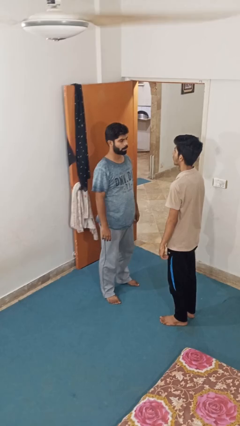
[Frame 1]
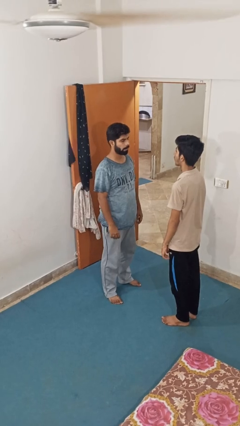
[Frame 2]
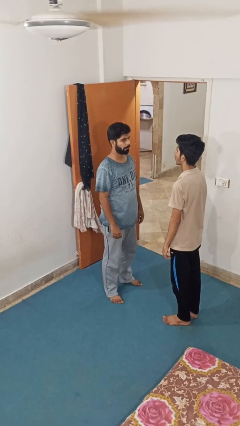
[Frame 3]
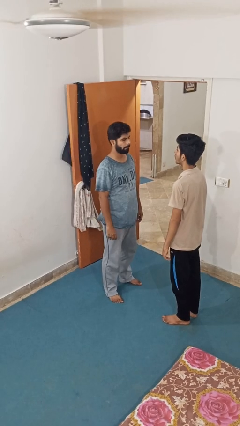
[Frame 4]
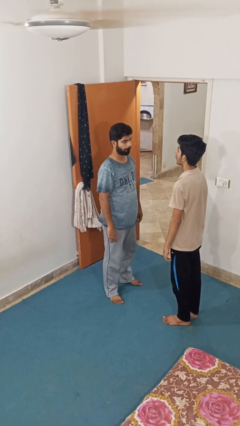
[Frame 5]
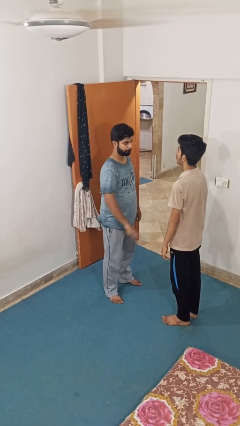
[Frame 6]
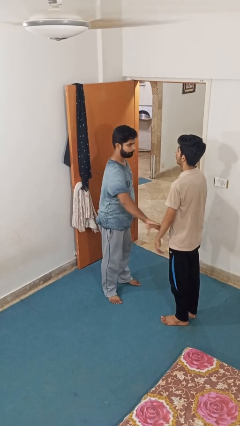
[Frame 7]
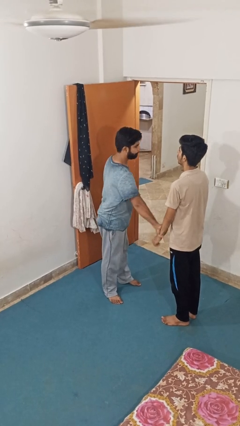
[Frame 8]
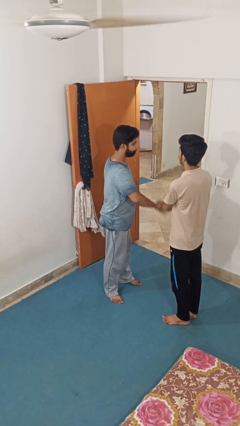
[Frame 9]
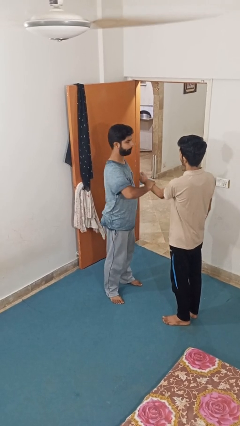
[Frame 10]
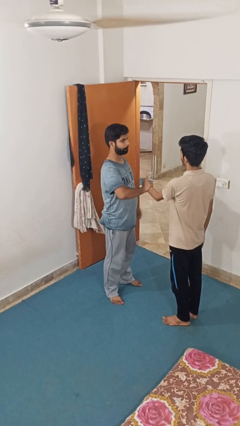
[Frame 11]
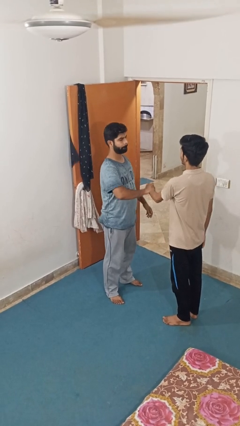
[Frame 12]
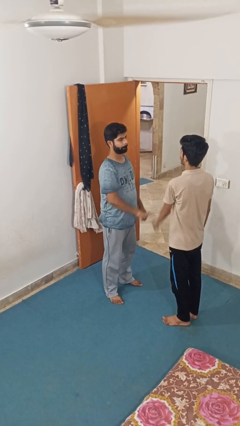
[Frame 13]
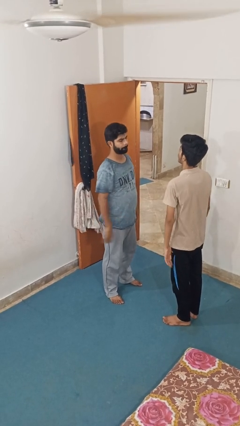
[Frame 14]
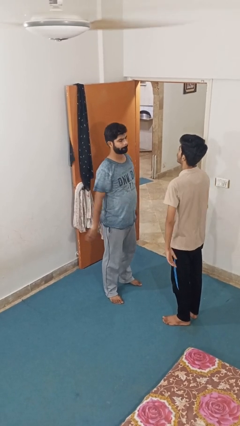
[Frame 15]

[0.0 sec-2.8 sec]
person grabs person by forearm

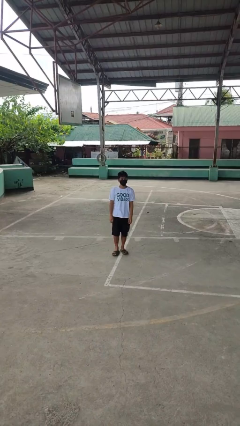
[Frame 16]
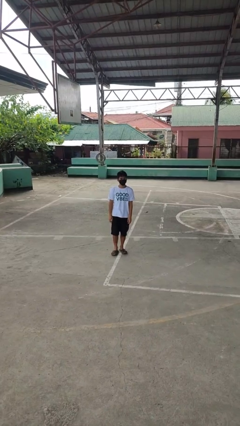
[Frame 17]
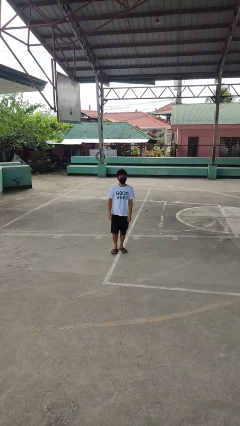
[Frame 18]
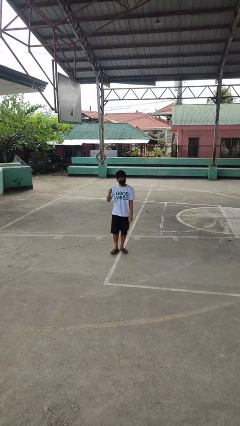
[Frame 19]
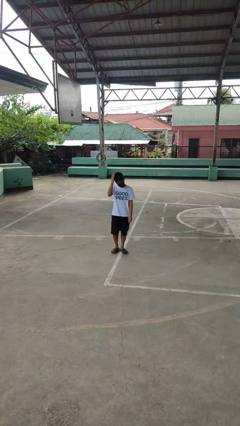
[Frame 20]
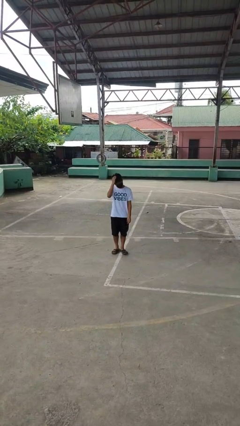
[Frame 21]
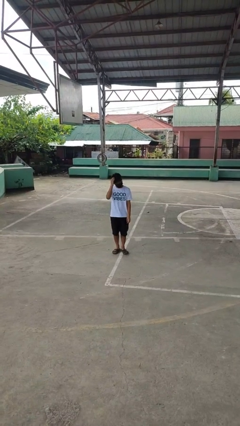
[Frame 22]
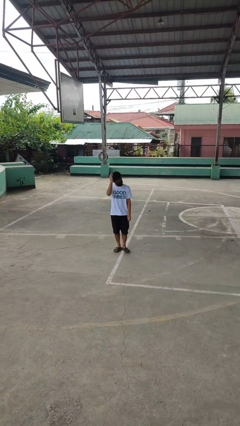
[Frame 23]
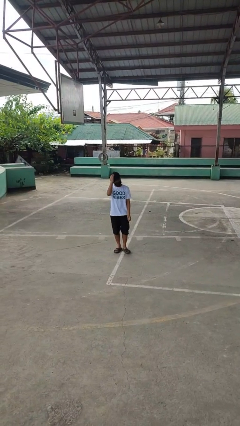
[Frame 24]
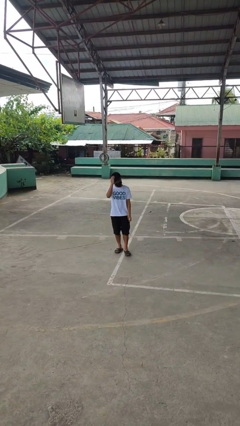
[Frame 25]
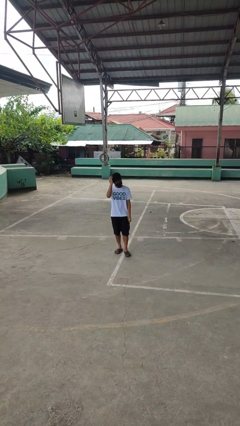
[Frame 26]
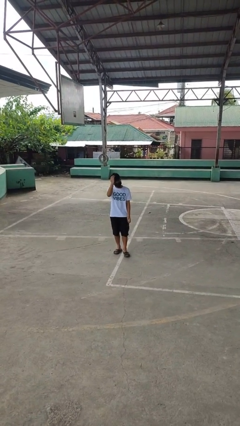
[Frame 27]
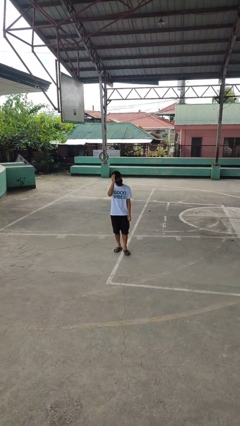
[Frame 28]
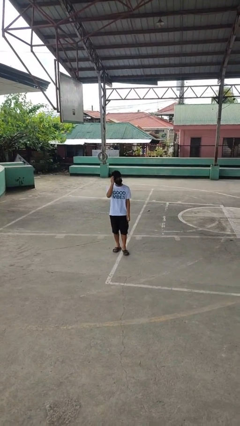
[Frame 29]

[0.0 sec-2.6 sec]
person pats head

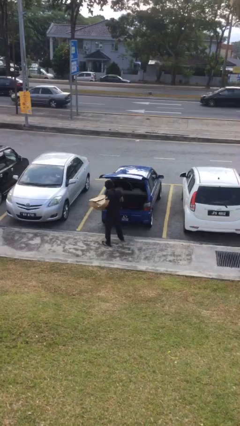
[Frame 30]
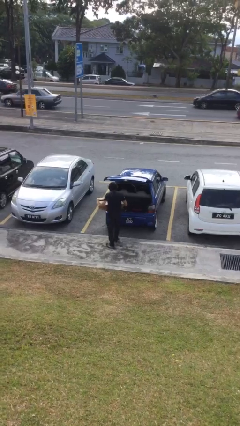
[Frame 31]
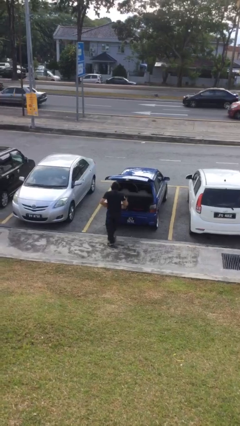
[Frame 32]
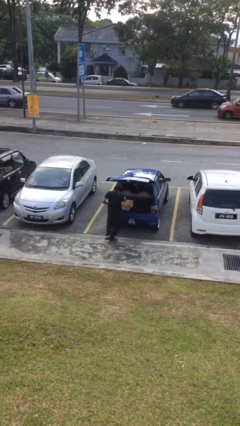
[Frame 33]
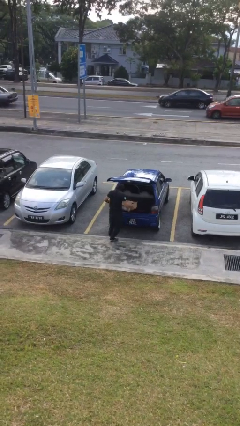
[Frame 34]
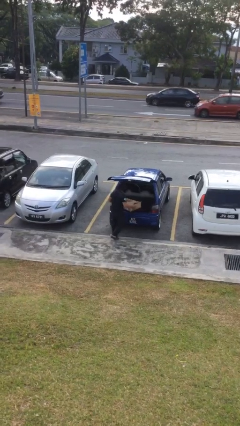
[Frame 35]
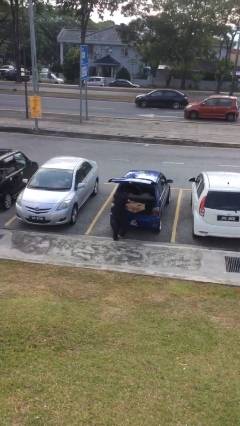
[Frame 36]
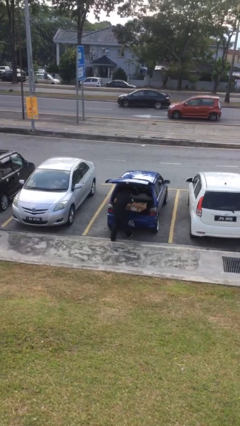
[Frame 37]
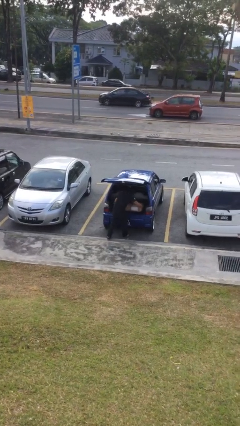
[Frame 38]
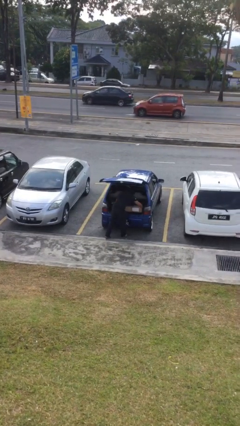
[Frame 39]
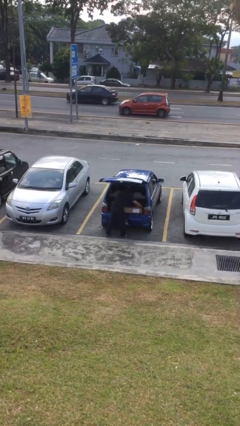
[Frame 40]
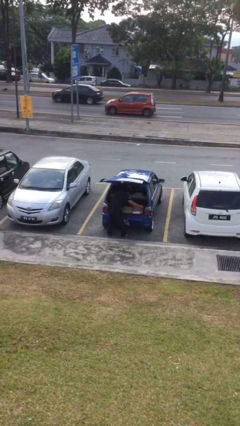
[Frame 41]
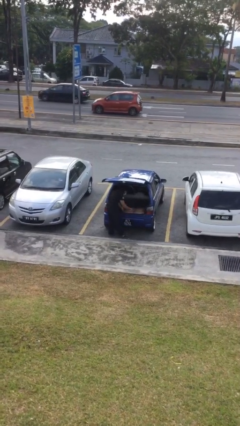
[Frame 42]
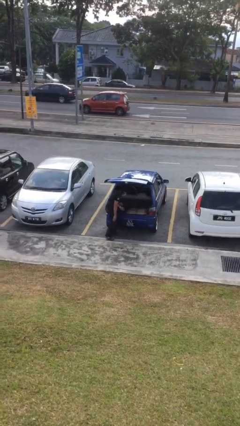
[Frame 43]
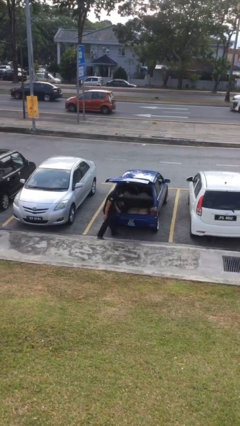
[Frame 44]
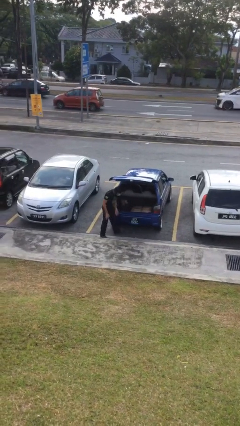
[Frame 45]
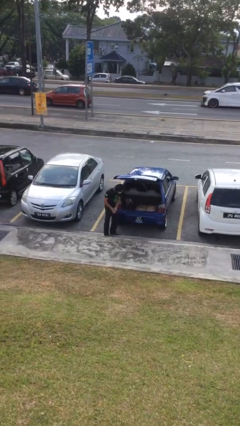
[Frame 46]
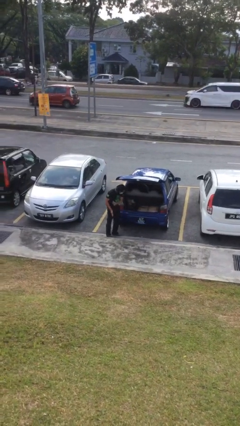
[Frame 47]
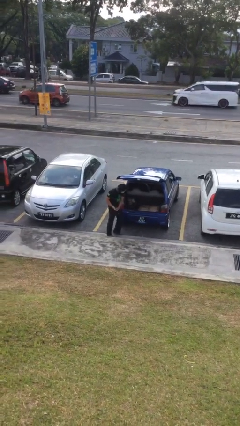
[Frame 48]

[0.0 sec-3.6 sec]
person loads car

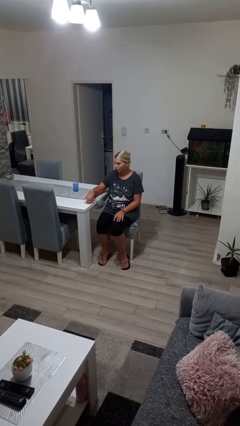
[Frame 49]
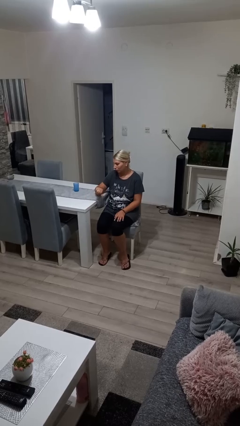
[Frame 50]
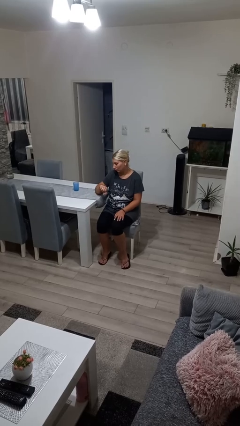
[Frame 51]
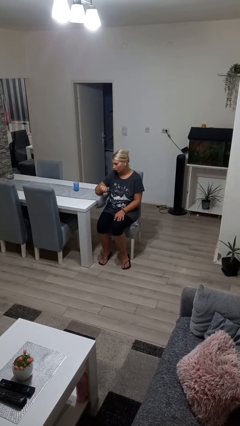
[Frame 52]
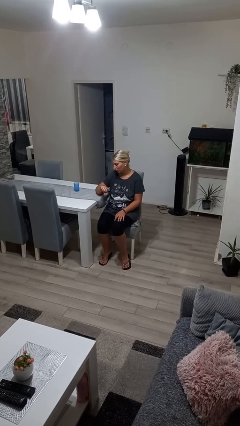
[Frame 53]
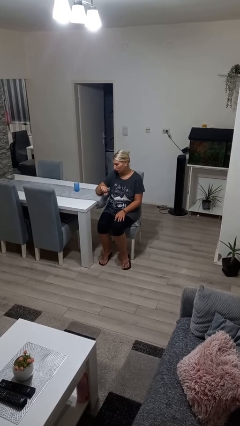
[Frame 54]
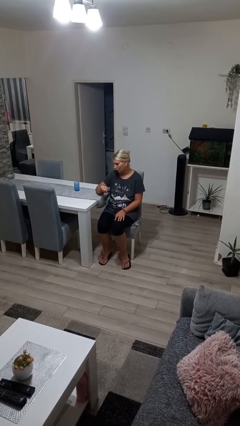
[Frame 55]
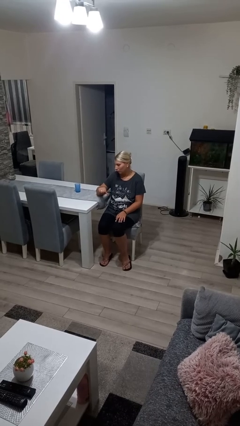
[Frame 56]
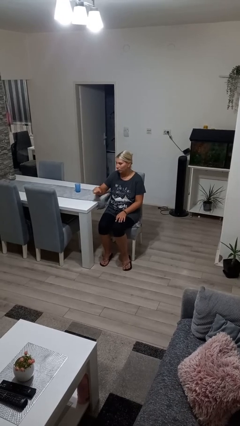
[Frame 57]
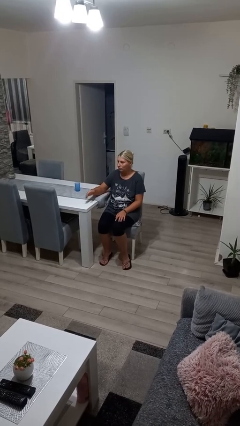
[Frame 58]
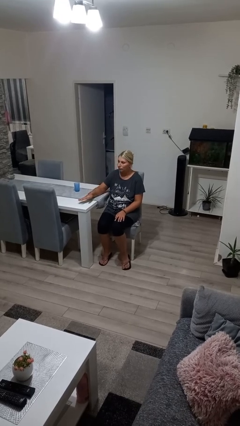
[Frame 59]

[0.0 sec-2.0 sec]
person looks at wristwatch

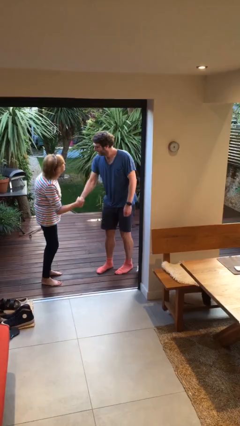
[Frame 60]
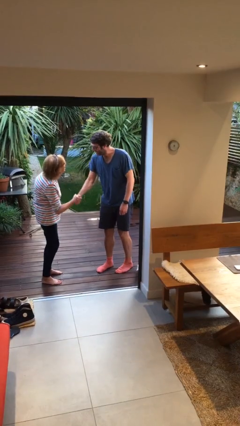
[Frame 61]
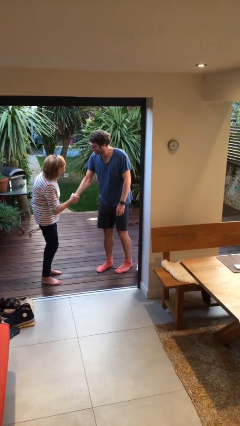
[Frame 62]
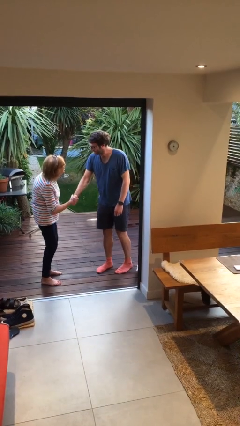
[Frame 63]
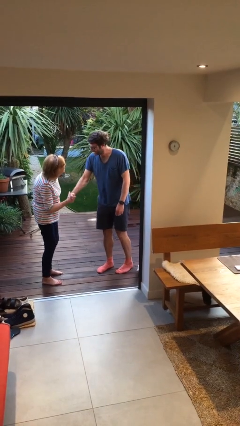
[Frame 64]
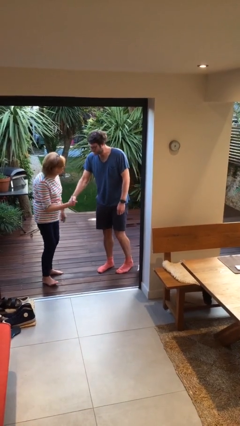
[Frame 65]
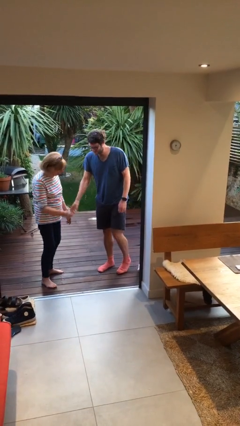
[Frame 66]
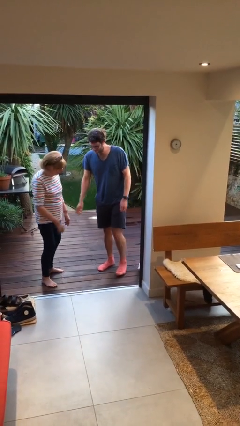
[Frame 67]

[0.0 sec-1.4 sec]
person shakes hand

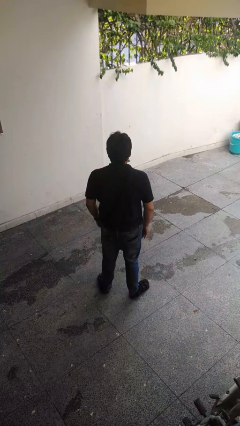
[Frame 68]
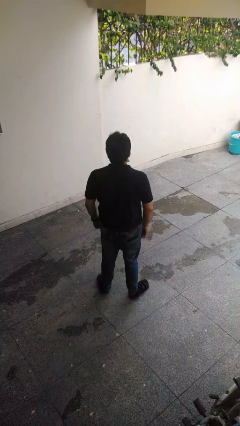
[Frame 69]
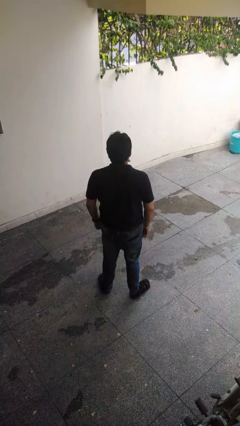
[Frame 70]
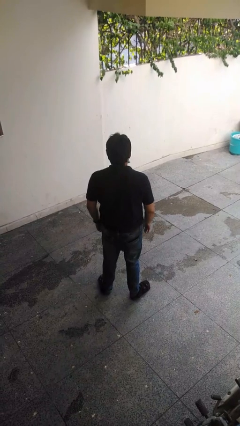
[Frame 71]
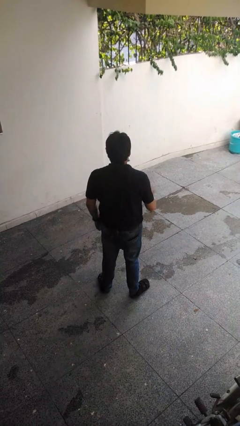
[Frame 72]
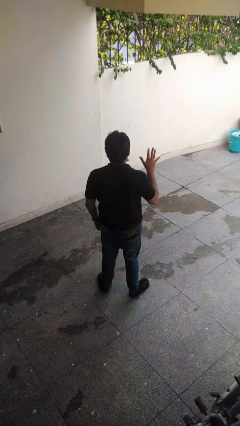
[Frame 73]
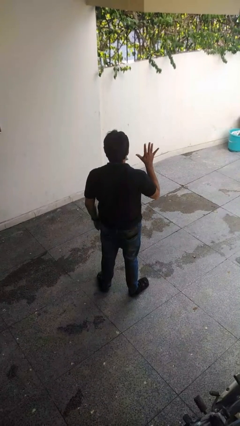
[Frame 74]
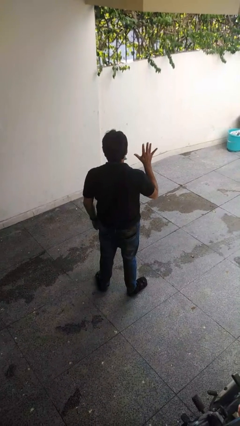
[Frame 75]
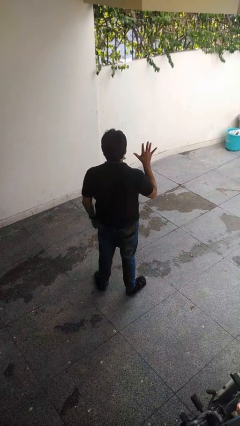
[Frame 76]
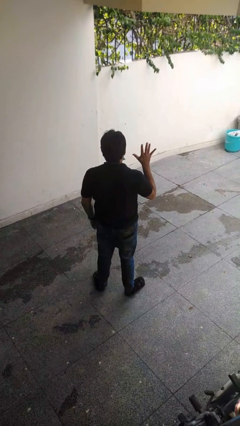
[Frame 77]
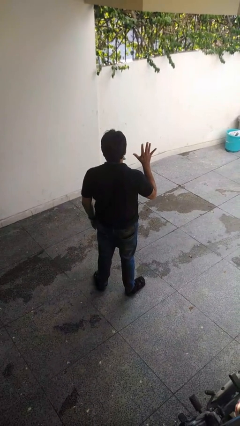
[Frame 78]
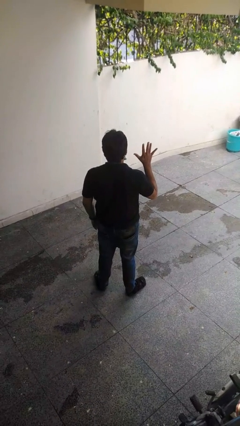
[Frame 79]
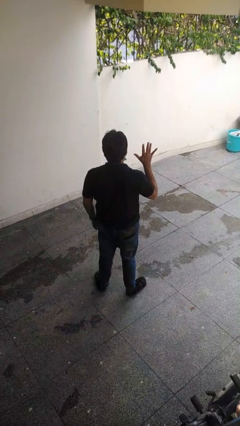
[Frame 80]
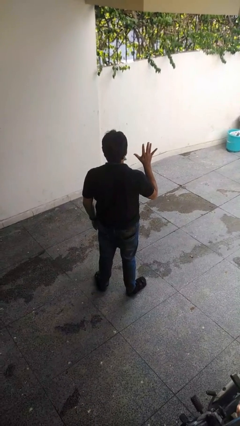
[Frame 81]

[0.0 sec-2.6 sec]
person gestures number five

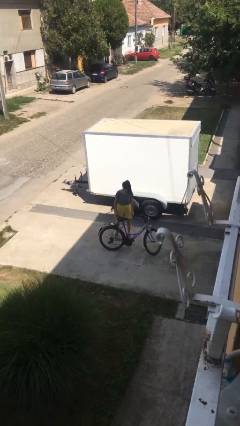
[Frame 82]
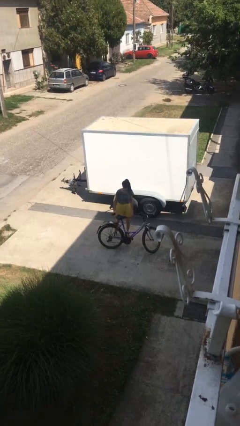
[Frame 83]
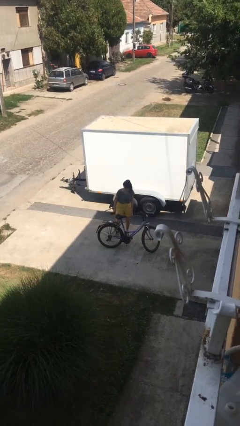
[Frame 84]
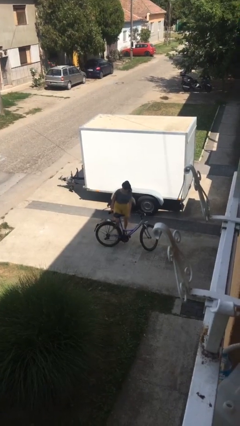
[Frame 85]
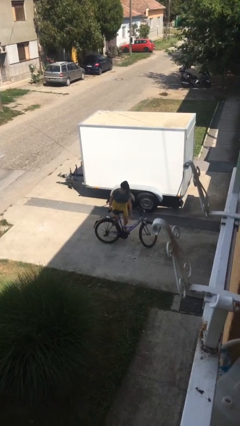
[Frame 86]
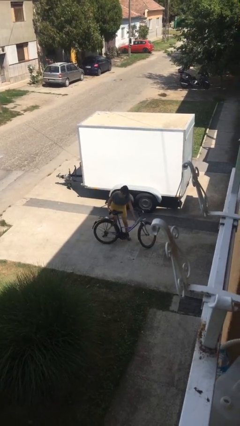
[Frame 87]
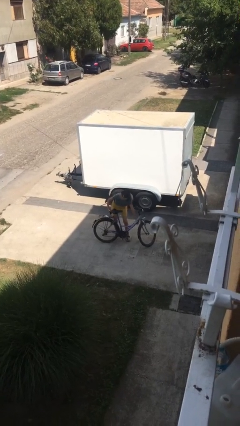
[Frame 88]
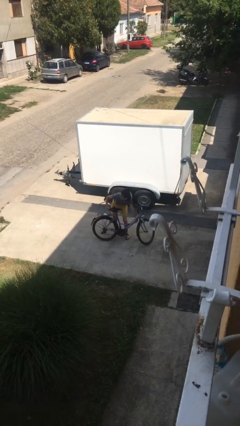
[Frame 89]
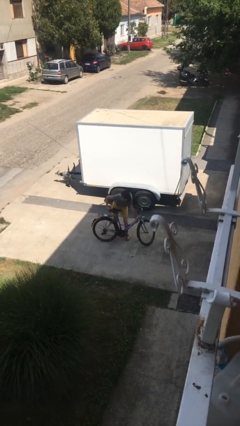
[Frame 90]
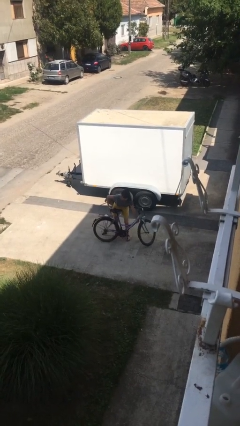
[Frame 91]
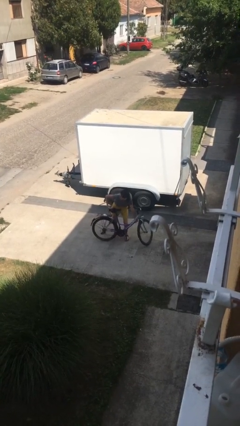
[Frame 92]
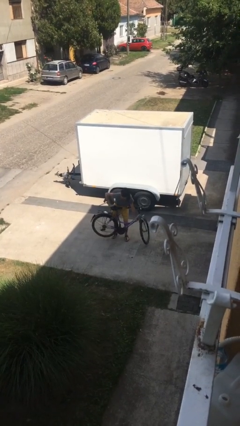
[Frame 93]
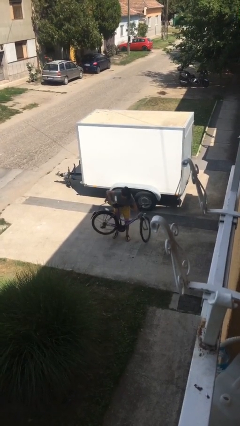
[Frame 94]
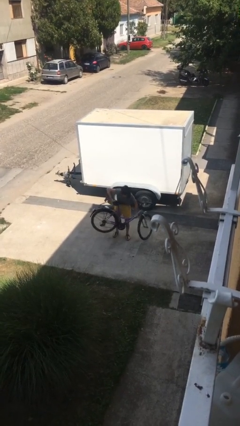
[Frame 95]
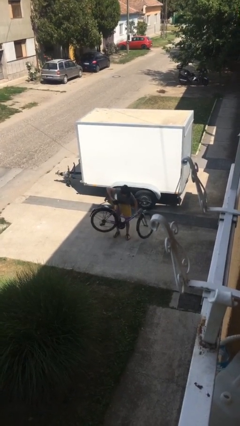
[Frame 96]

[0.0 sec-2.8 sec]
person picks up object from floor
